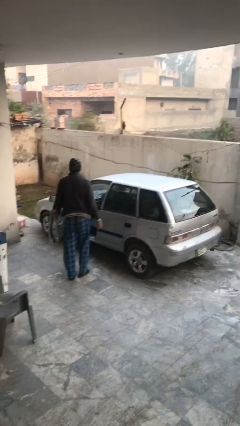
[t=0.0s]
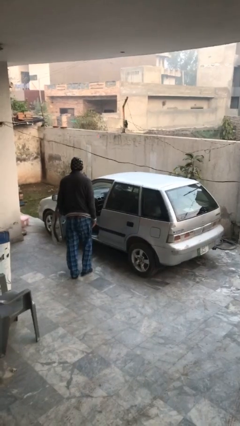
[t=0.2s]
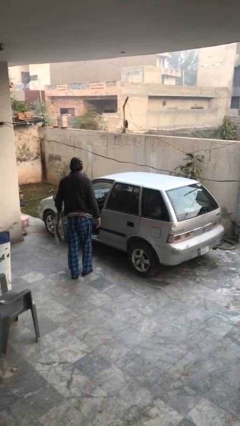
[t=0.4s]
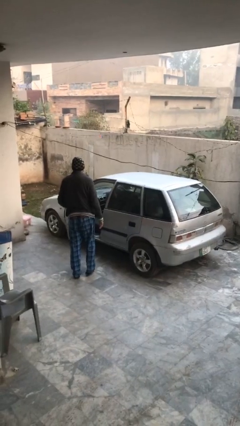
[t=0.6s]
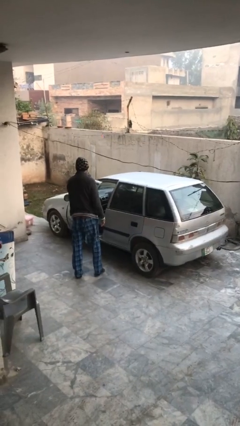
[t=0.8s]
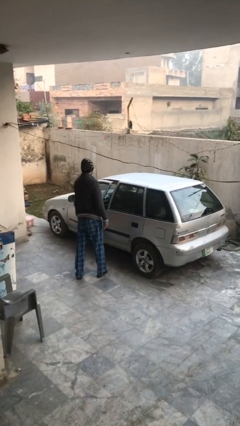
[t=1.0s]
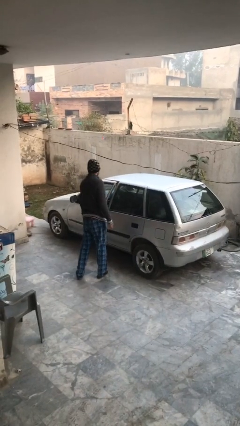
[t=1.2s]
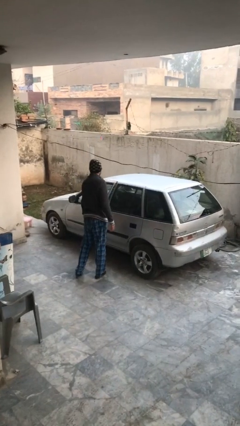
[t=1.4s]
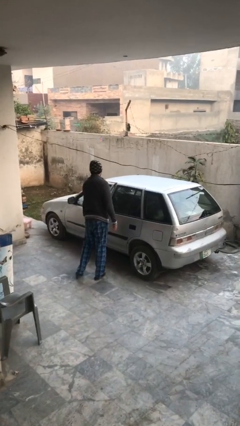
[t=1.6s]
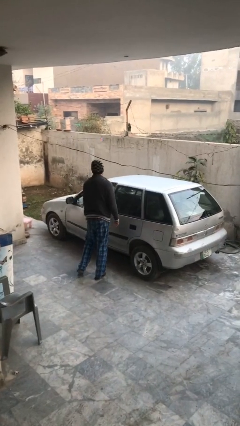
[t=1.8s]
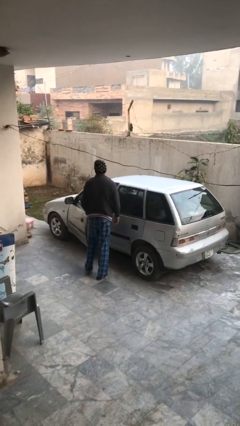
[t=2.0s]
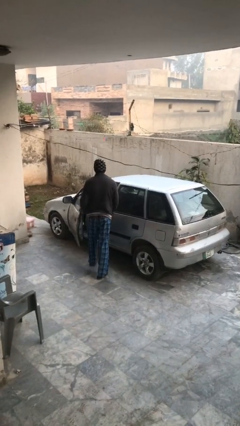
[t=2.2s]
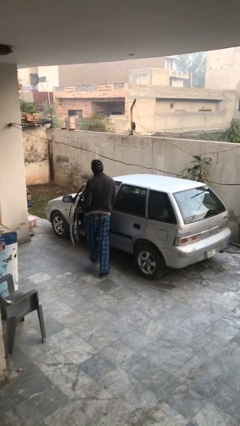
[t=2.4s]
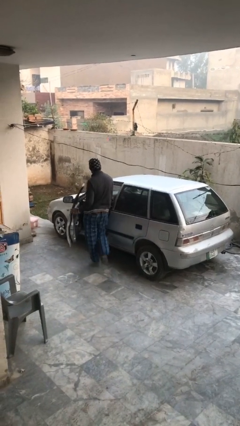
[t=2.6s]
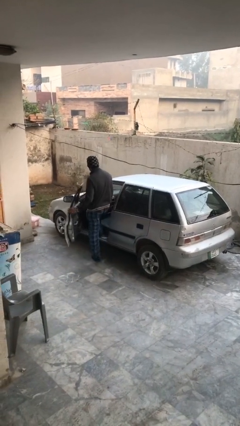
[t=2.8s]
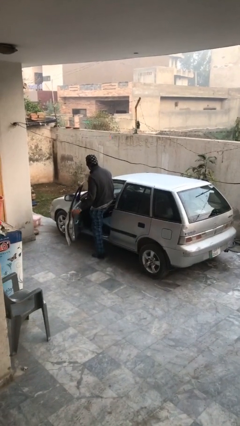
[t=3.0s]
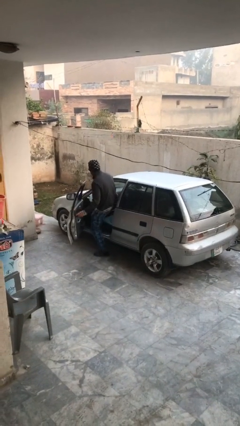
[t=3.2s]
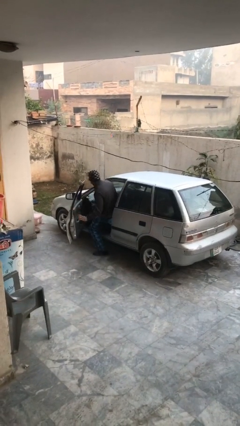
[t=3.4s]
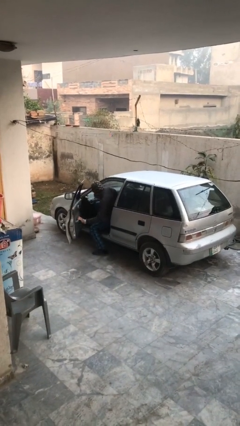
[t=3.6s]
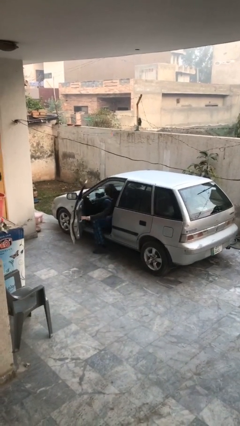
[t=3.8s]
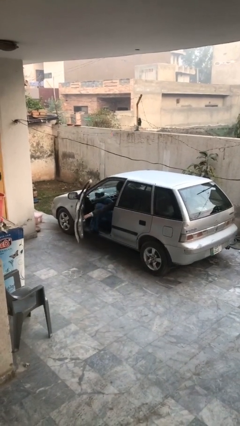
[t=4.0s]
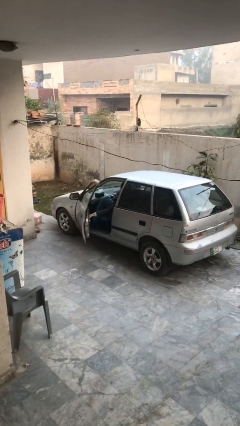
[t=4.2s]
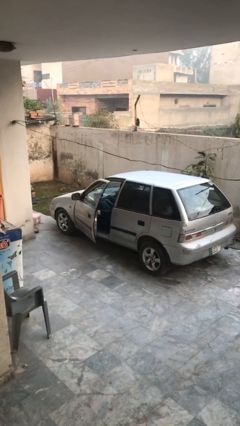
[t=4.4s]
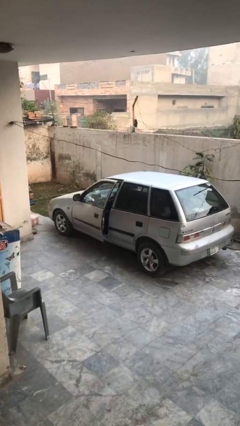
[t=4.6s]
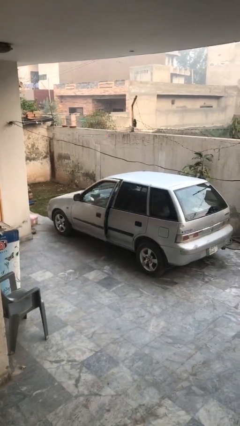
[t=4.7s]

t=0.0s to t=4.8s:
car picks up person

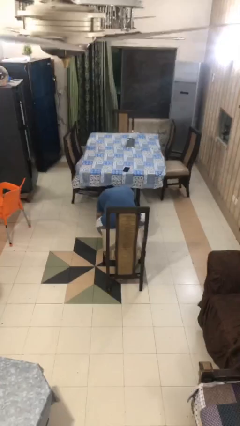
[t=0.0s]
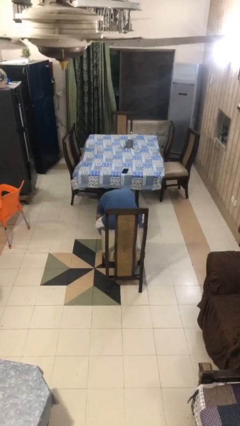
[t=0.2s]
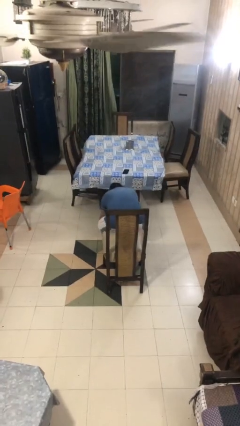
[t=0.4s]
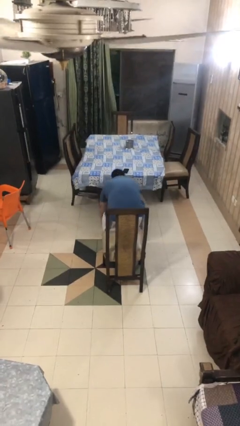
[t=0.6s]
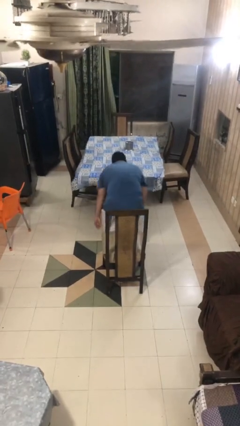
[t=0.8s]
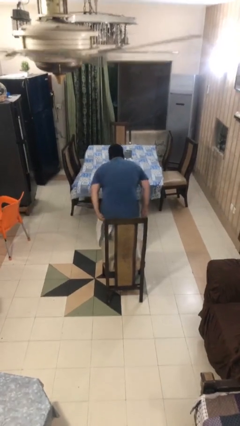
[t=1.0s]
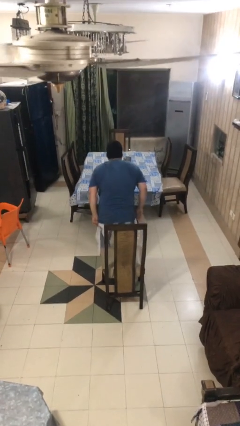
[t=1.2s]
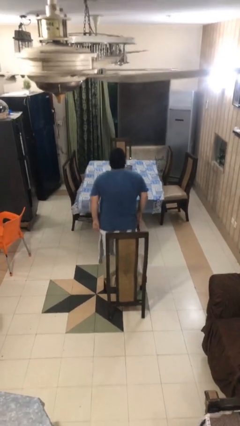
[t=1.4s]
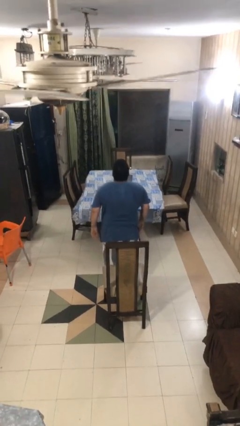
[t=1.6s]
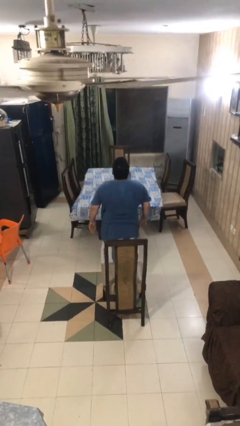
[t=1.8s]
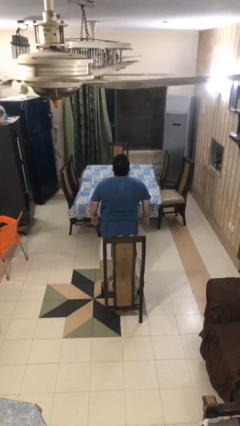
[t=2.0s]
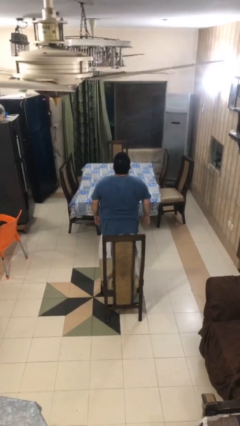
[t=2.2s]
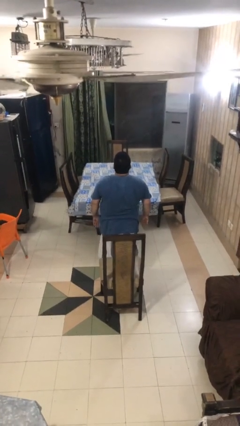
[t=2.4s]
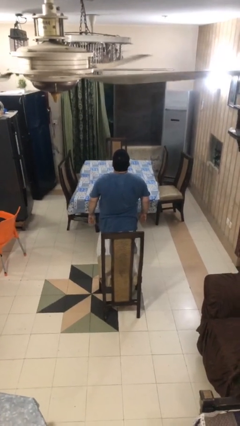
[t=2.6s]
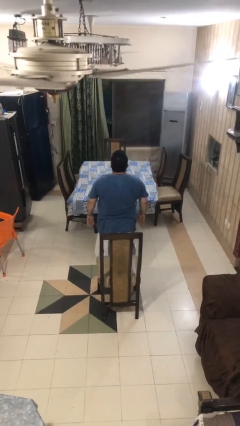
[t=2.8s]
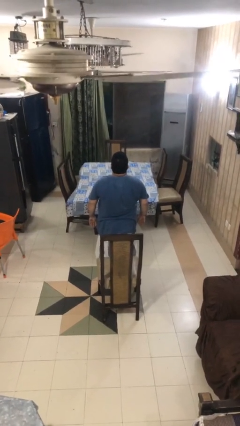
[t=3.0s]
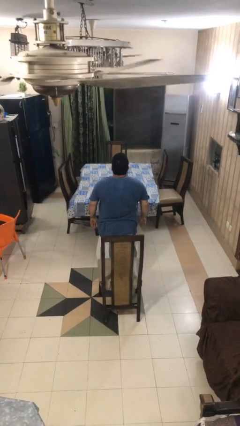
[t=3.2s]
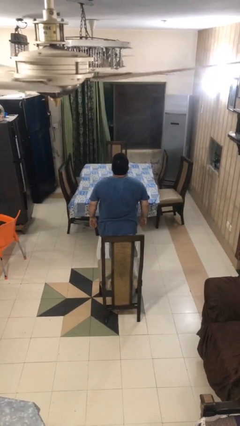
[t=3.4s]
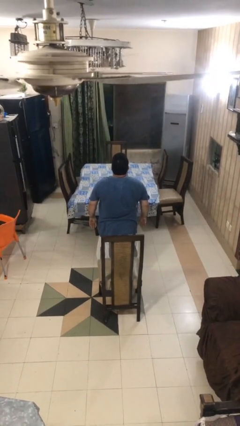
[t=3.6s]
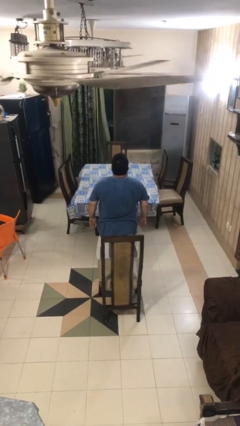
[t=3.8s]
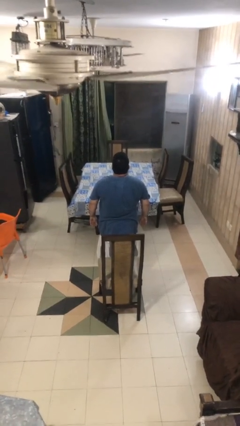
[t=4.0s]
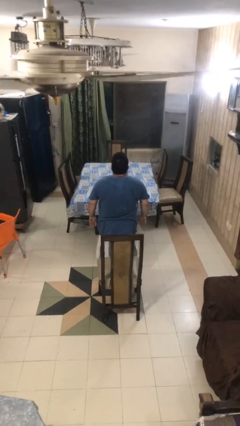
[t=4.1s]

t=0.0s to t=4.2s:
person stands up from floor

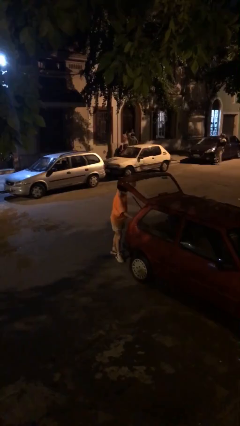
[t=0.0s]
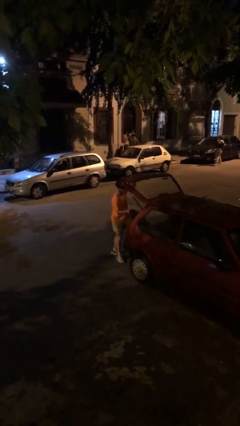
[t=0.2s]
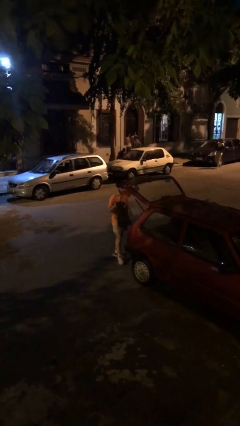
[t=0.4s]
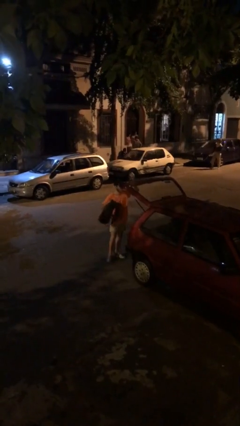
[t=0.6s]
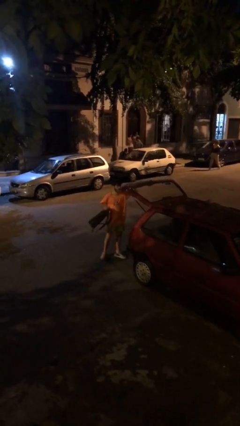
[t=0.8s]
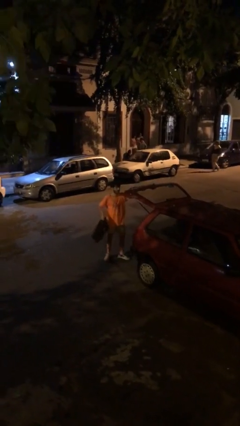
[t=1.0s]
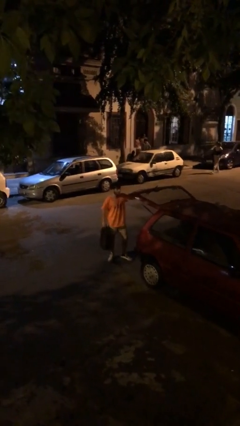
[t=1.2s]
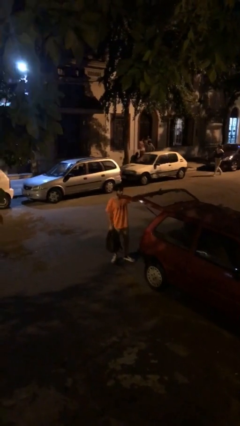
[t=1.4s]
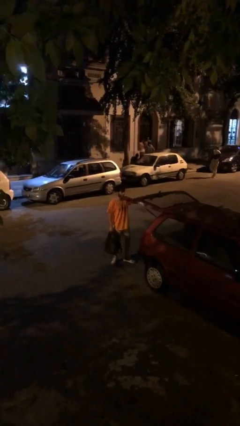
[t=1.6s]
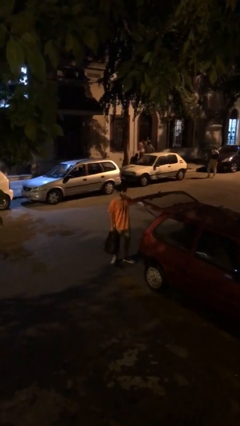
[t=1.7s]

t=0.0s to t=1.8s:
person unloads car

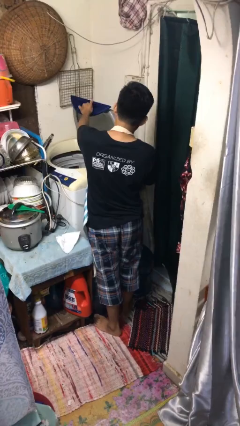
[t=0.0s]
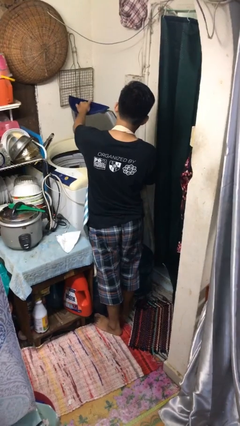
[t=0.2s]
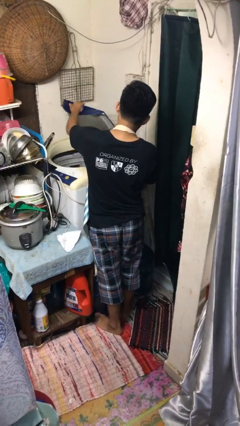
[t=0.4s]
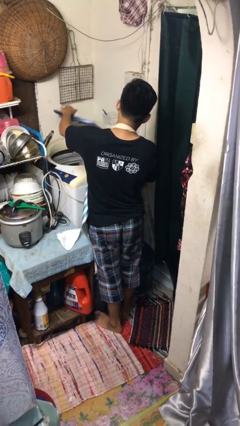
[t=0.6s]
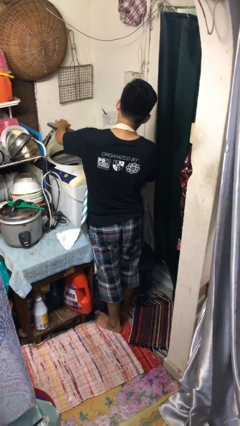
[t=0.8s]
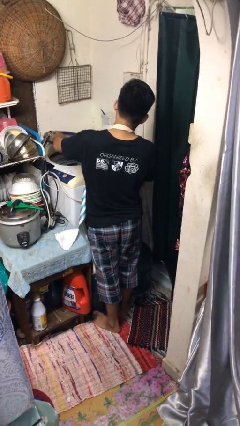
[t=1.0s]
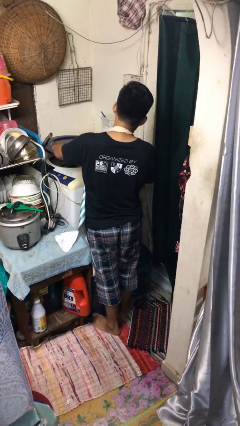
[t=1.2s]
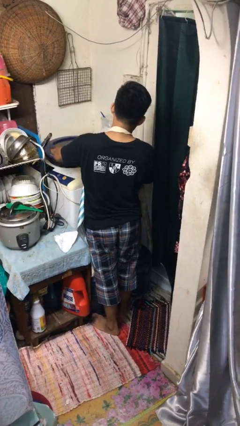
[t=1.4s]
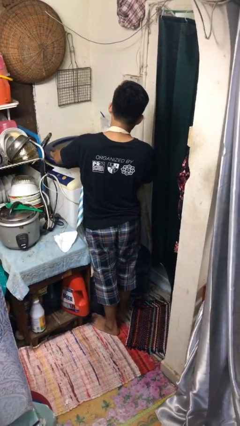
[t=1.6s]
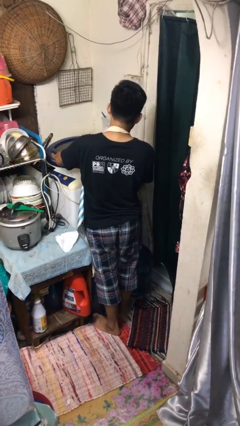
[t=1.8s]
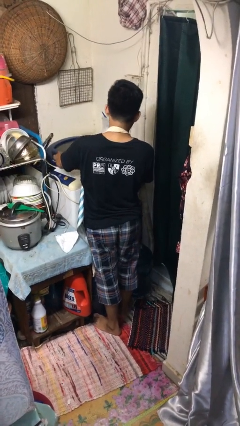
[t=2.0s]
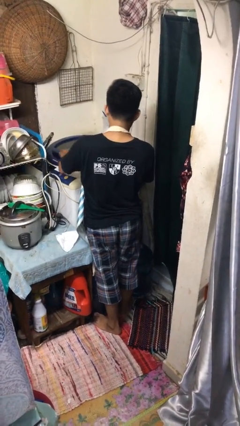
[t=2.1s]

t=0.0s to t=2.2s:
person closes clothes washer

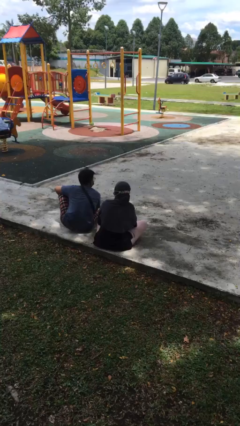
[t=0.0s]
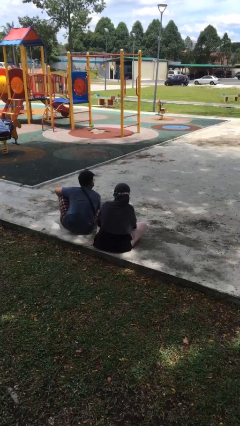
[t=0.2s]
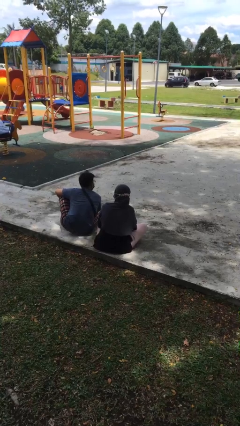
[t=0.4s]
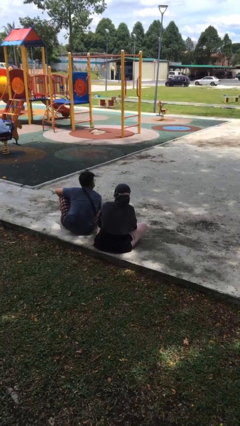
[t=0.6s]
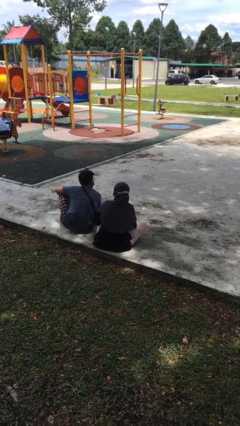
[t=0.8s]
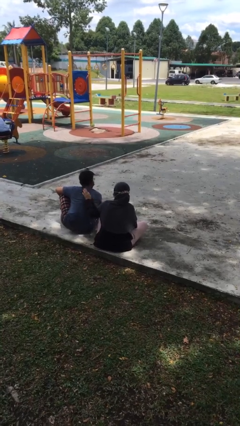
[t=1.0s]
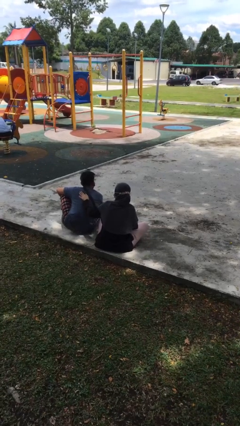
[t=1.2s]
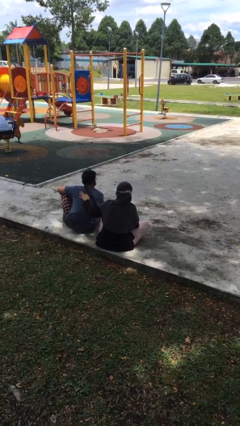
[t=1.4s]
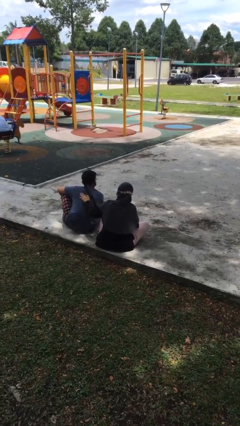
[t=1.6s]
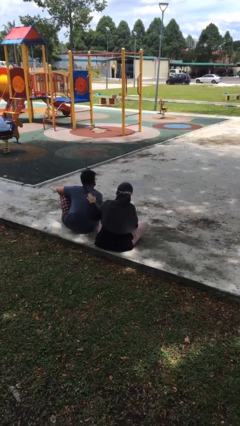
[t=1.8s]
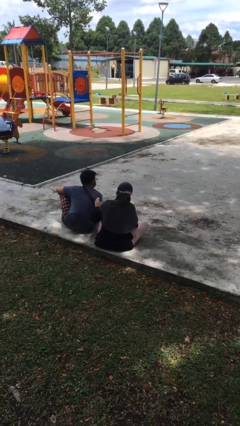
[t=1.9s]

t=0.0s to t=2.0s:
person touches back of person

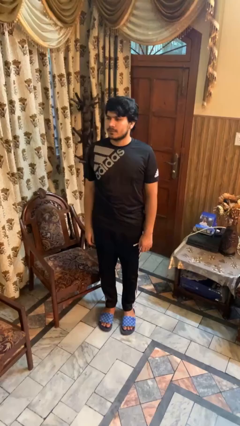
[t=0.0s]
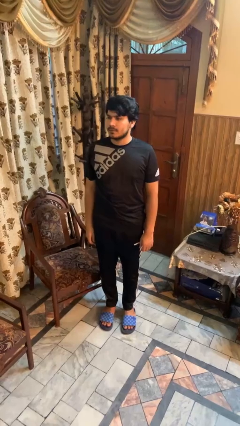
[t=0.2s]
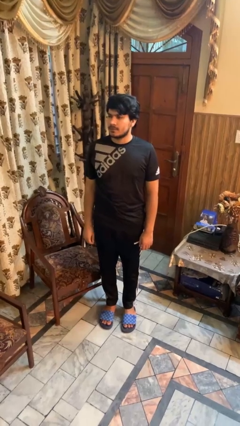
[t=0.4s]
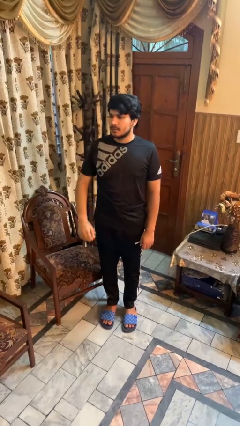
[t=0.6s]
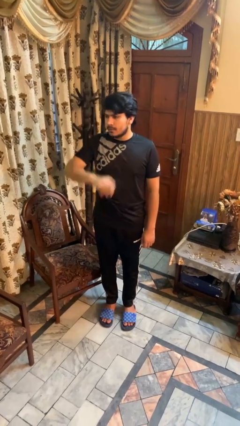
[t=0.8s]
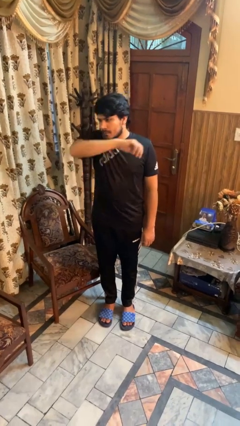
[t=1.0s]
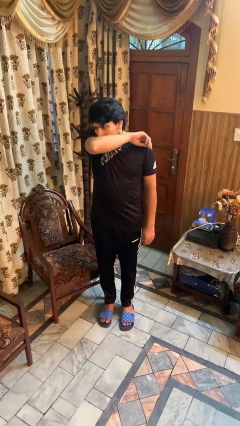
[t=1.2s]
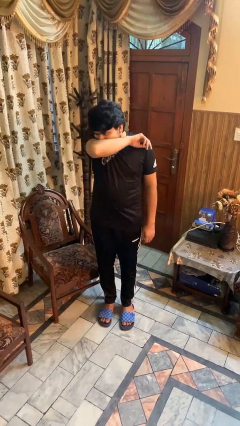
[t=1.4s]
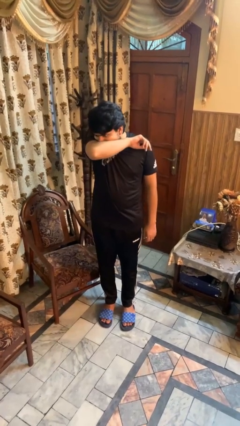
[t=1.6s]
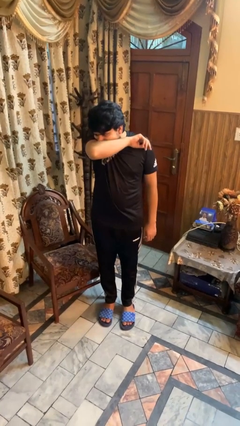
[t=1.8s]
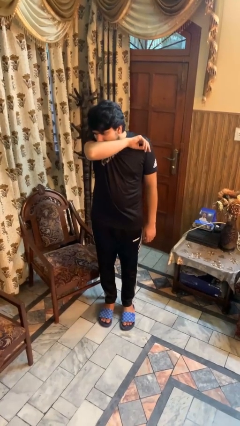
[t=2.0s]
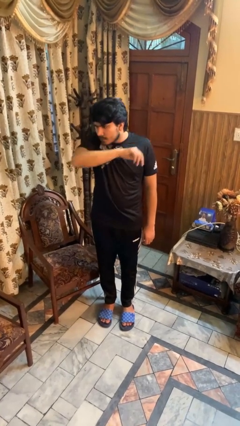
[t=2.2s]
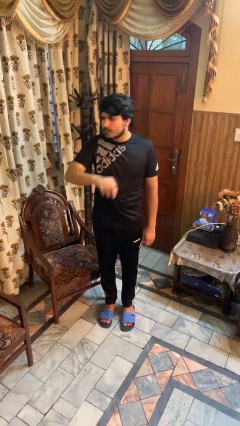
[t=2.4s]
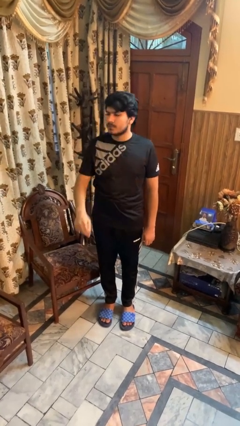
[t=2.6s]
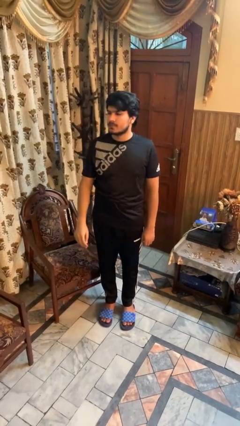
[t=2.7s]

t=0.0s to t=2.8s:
person sneezes into arm
